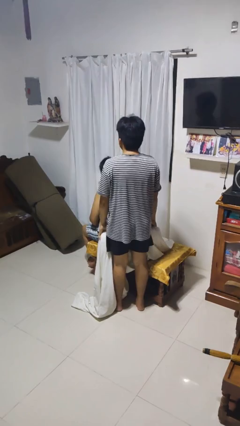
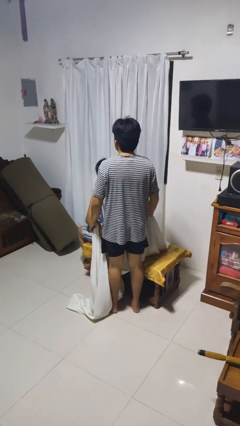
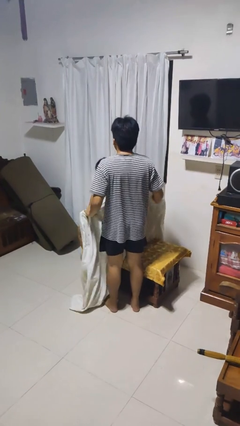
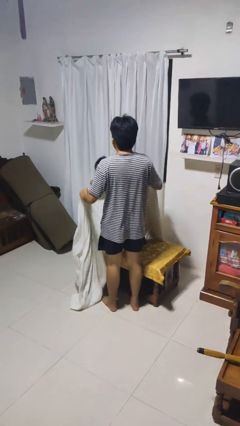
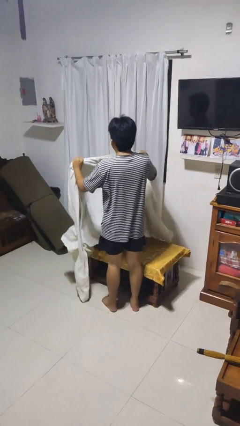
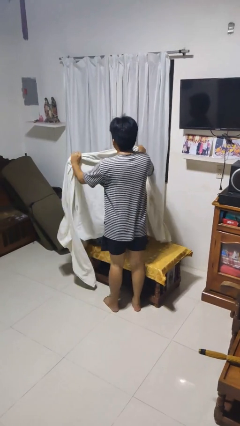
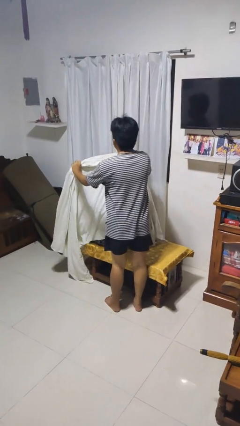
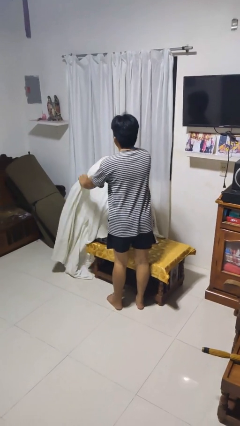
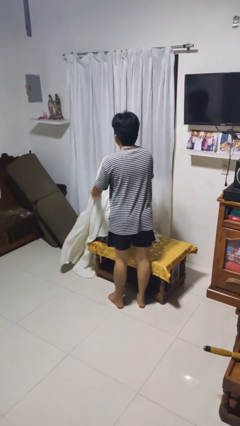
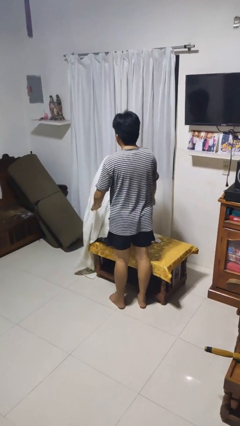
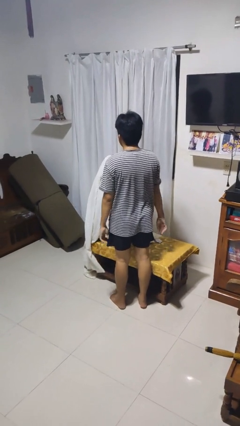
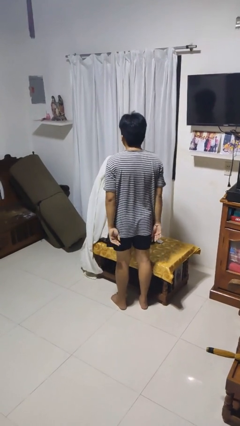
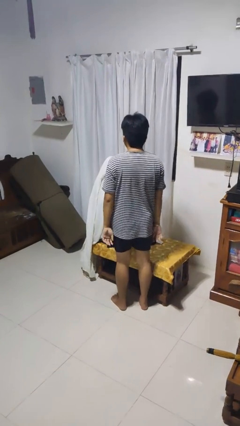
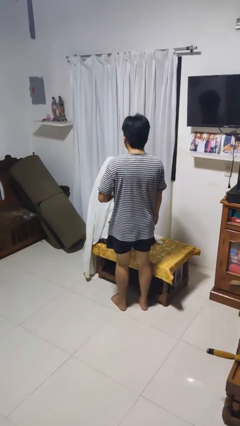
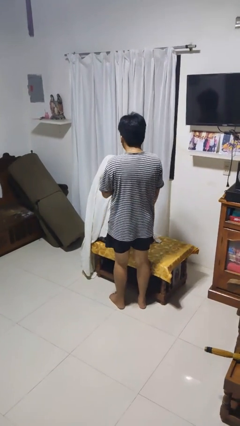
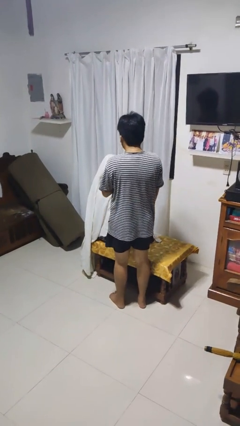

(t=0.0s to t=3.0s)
person covers friend with blanket

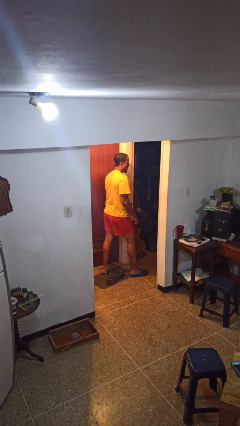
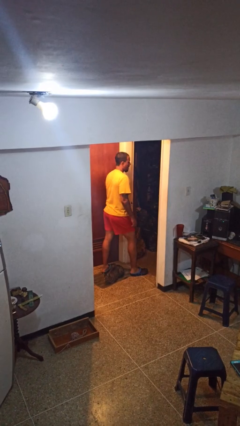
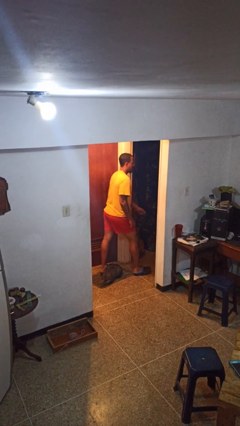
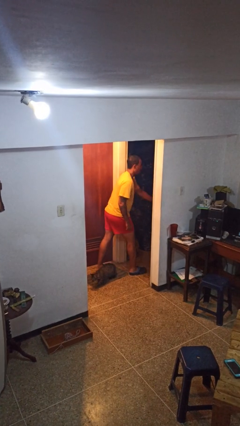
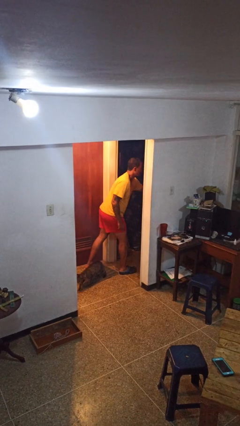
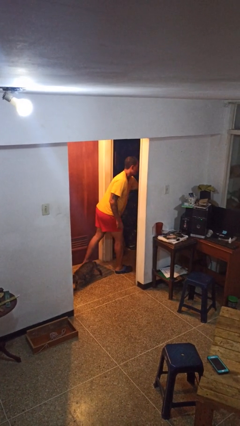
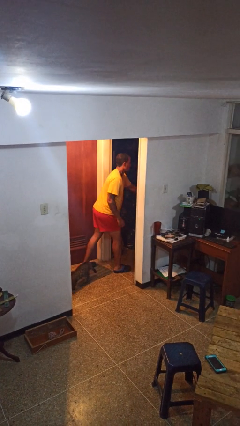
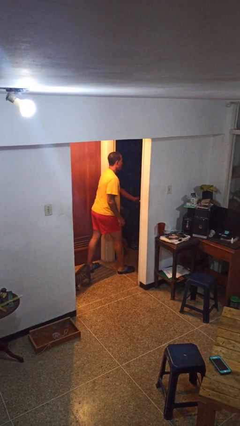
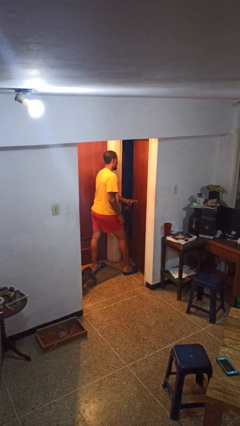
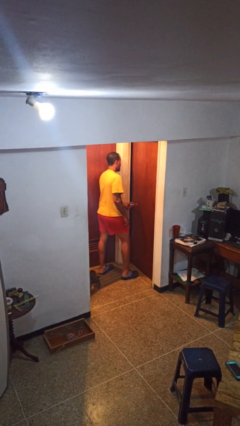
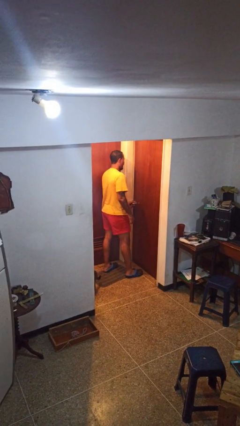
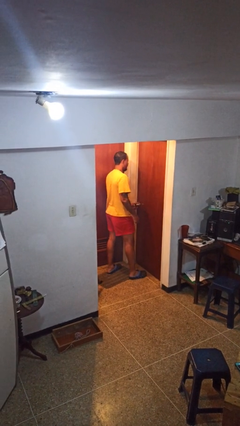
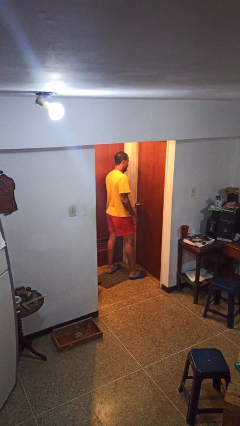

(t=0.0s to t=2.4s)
person closes facility door

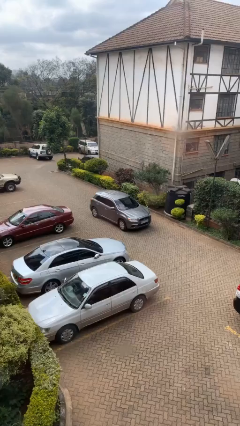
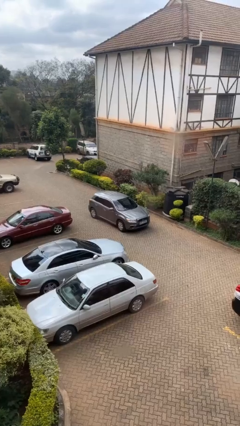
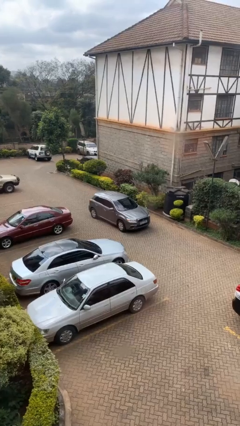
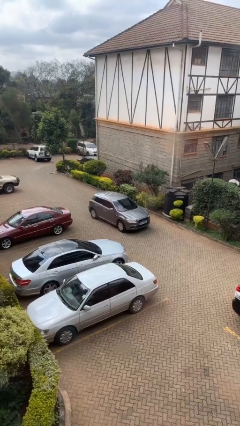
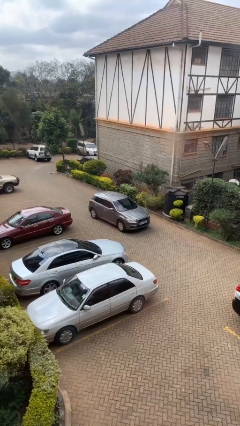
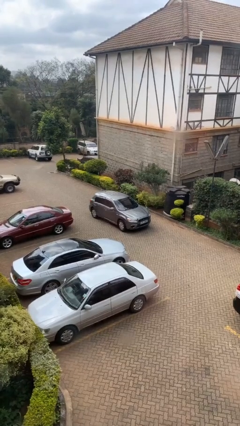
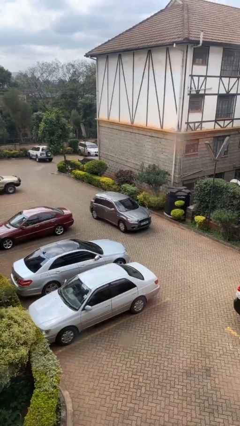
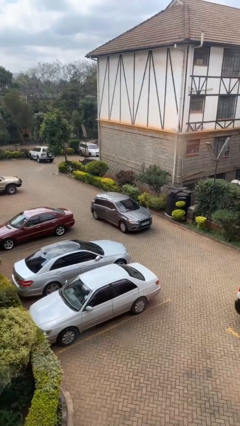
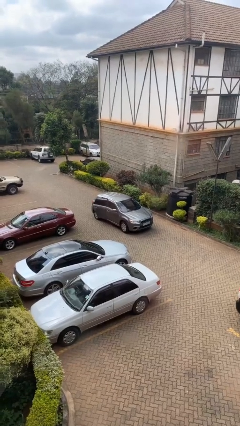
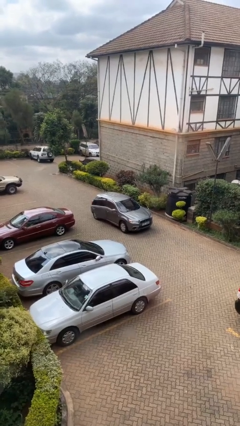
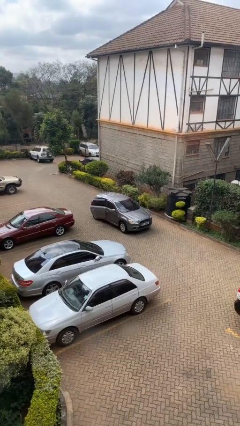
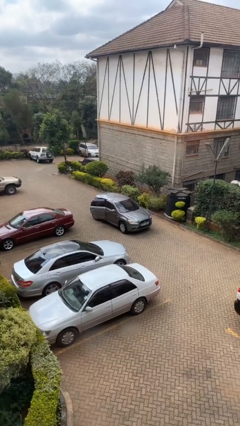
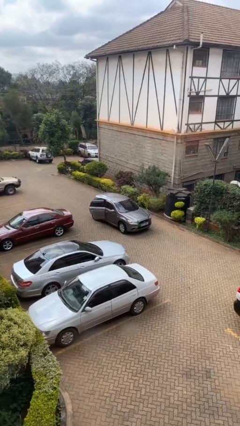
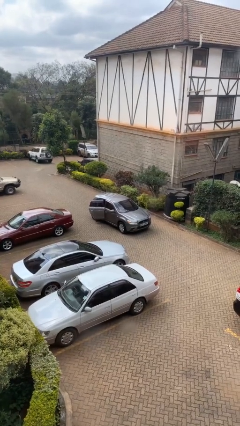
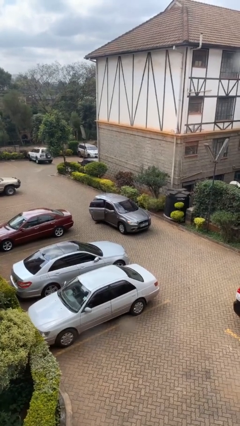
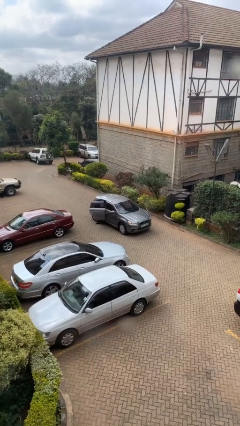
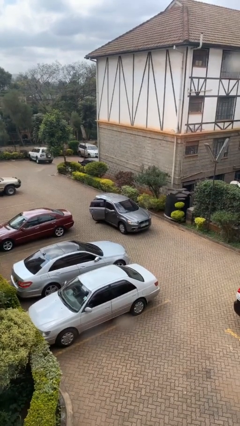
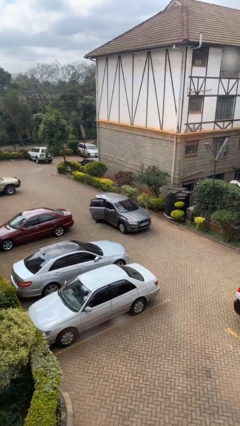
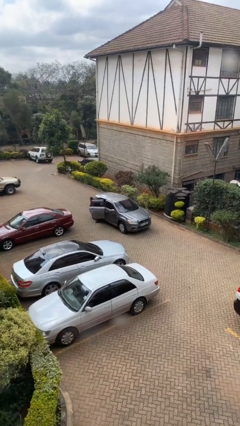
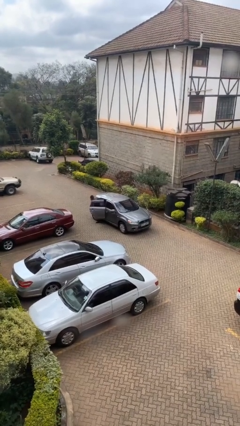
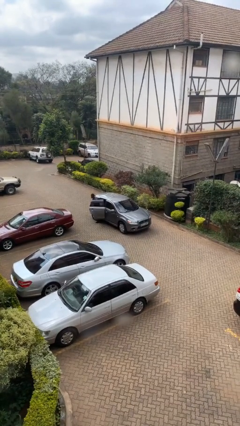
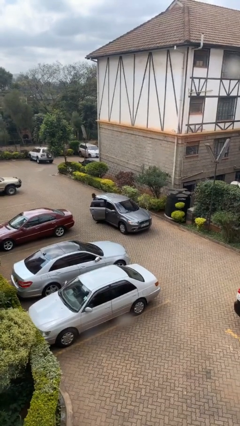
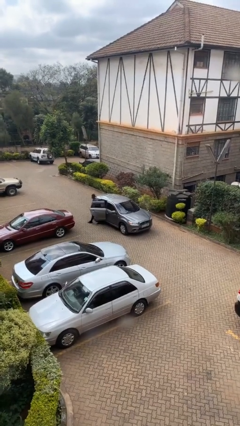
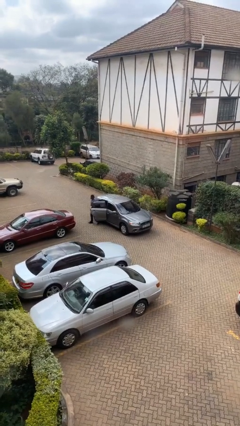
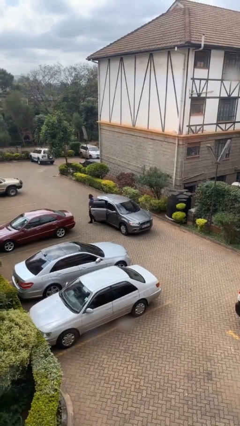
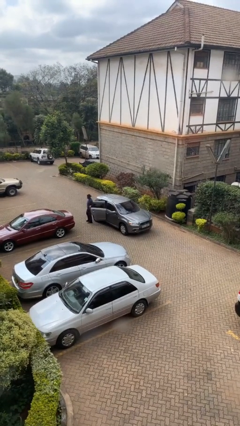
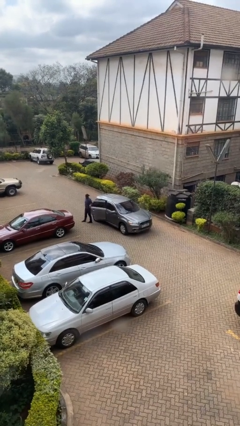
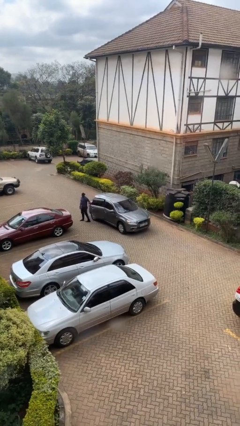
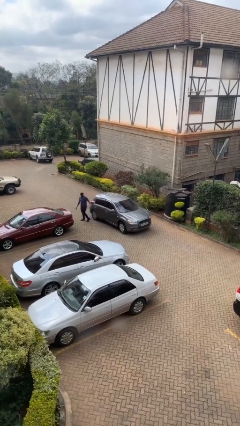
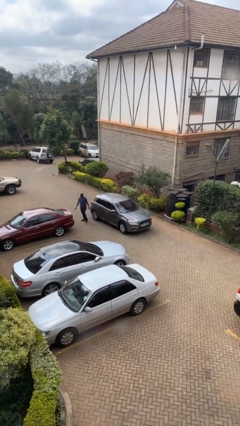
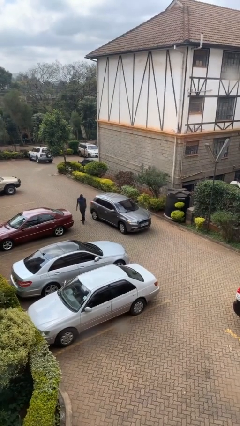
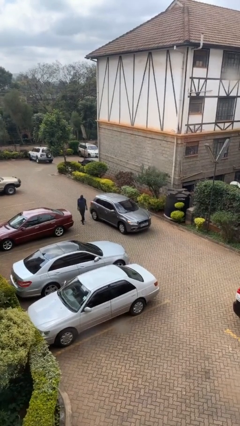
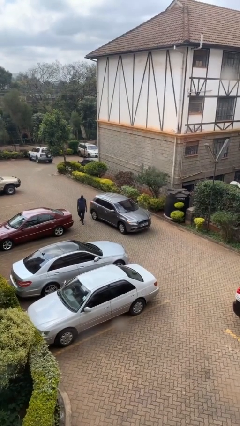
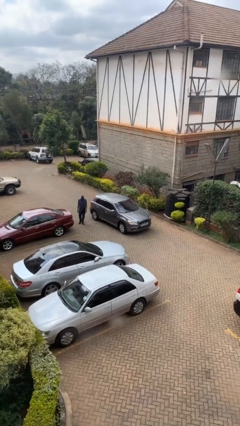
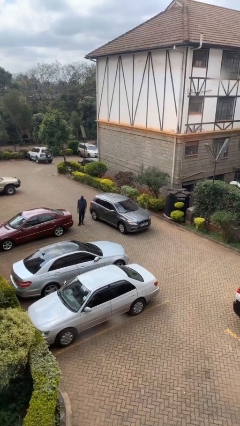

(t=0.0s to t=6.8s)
car drops off person

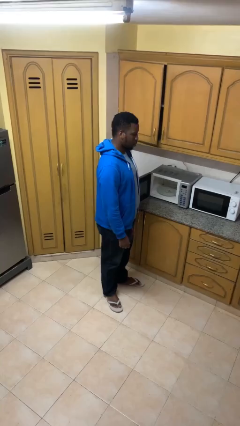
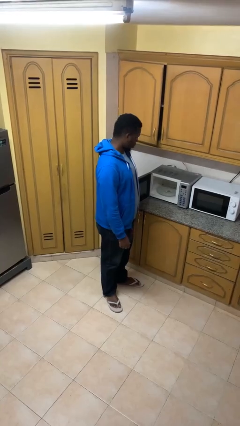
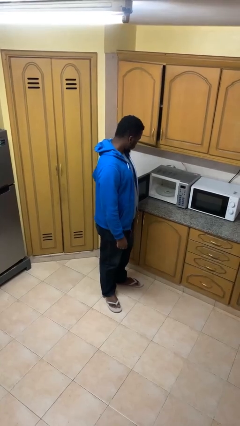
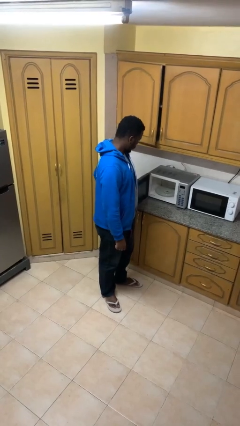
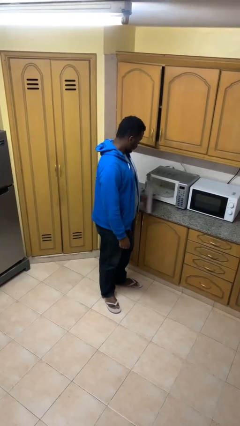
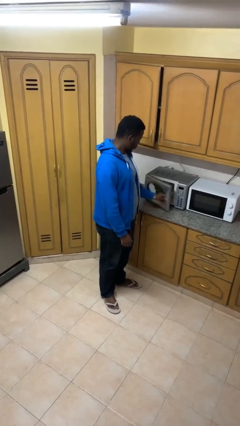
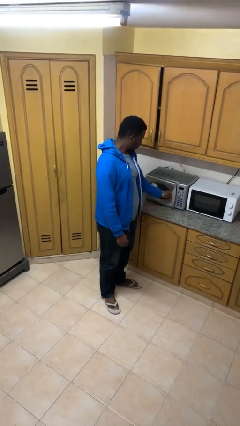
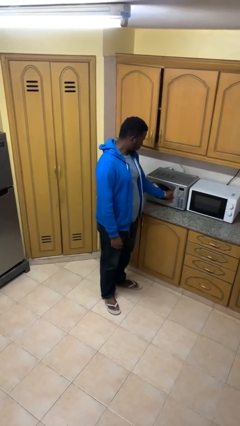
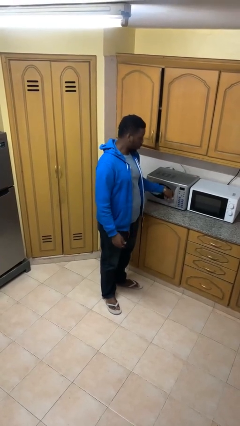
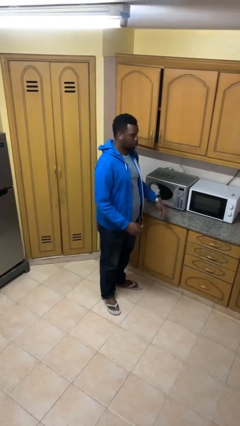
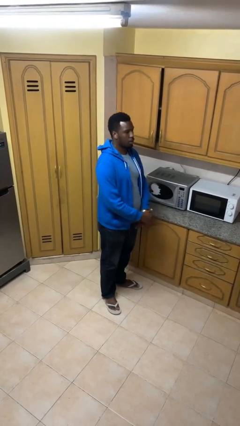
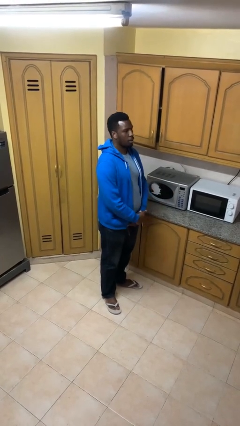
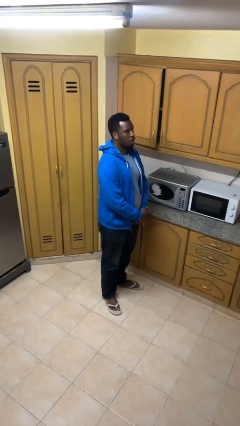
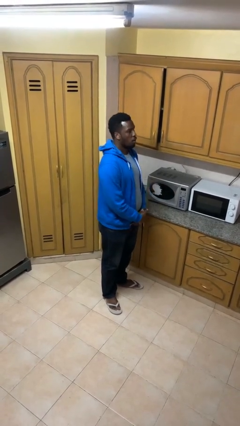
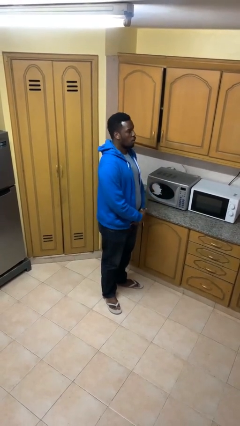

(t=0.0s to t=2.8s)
person closes microwave

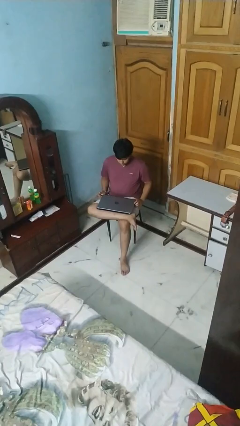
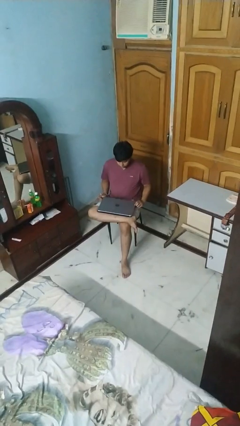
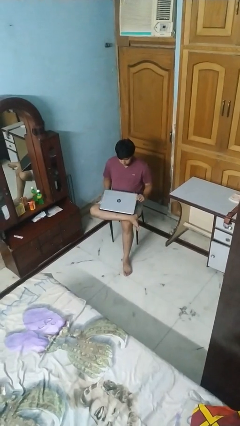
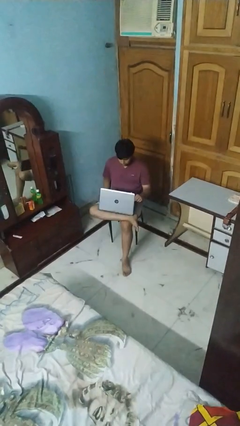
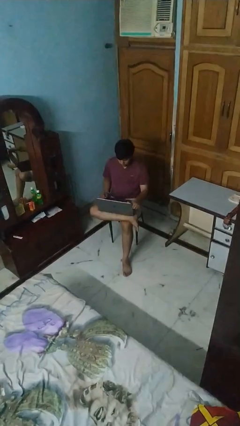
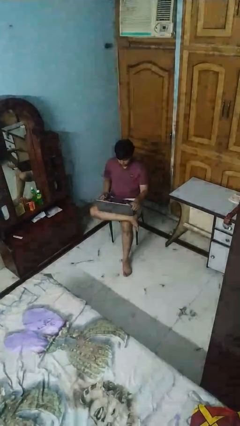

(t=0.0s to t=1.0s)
person opens laptop

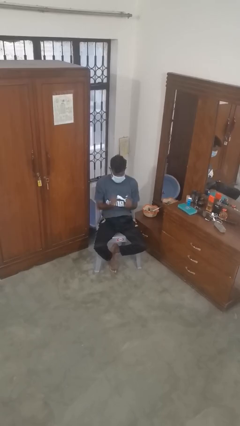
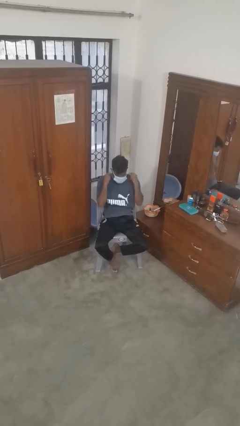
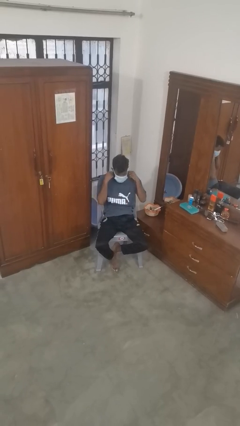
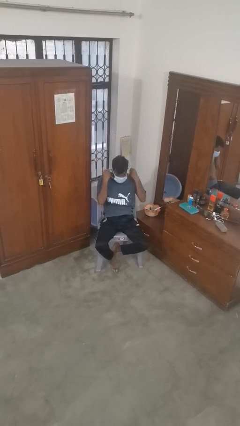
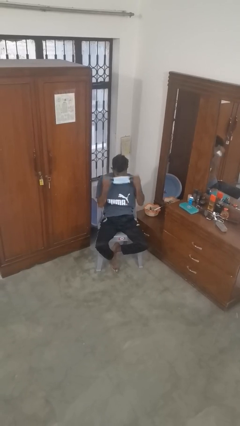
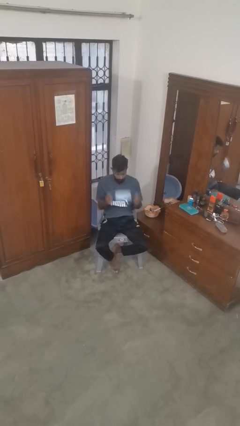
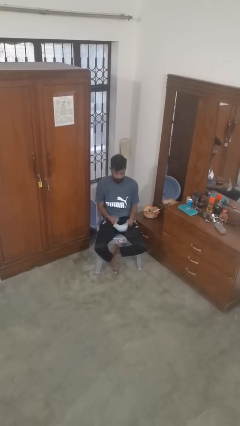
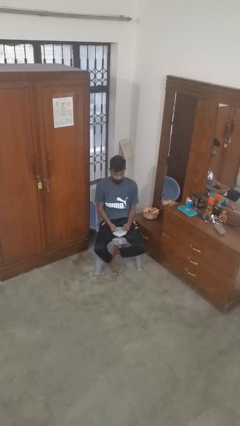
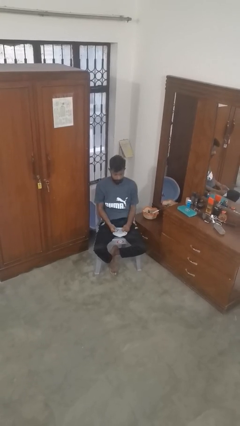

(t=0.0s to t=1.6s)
person takes off facemask
